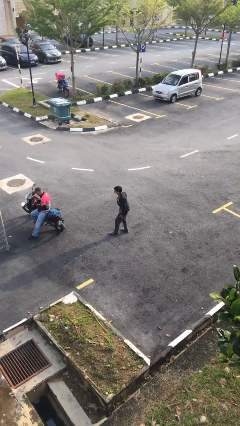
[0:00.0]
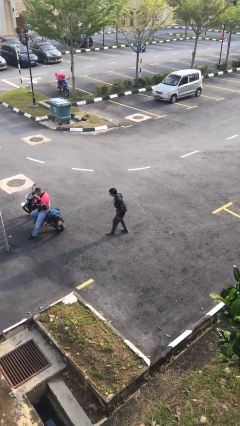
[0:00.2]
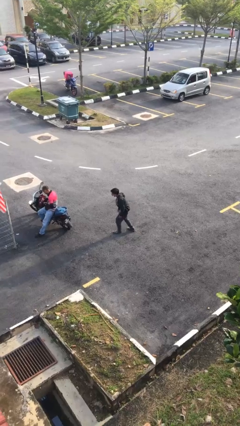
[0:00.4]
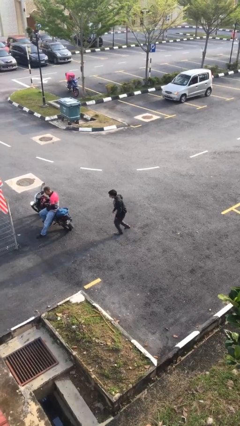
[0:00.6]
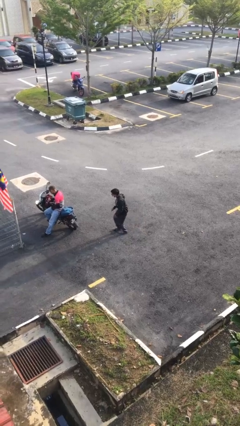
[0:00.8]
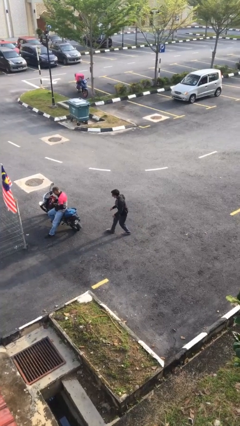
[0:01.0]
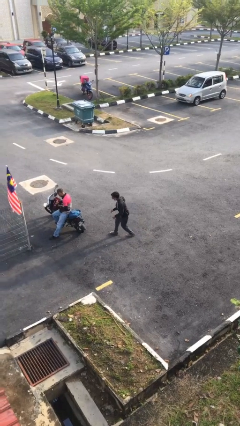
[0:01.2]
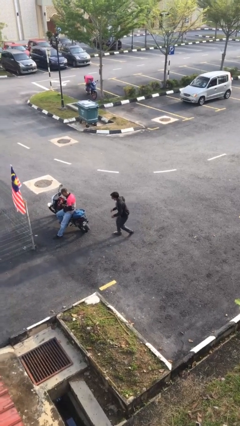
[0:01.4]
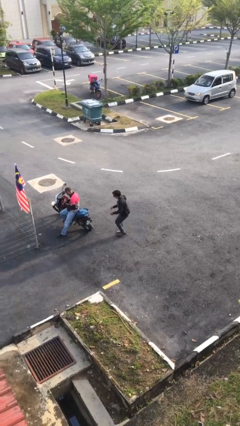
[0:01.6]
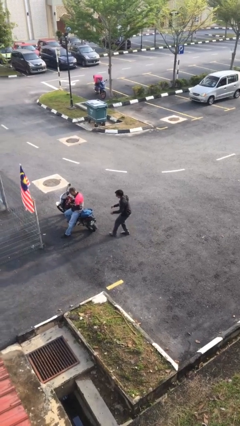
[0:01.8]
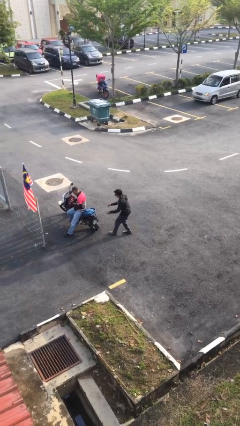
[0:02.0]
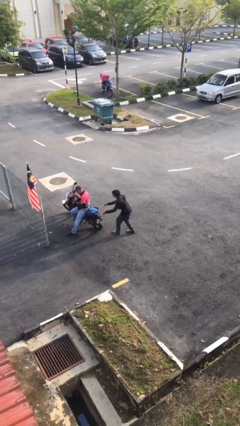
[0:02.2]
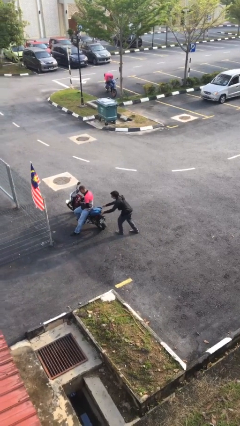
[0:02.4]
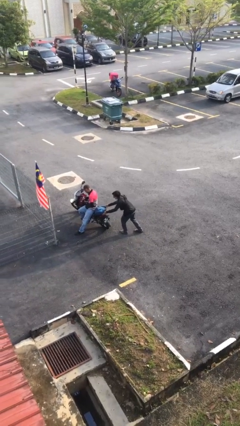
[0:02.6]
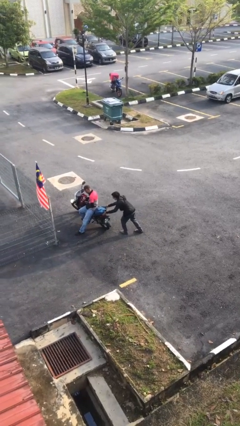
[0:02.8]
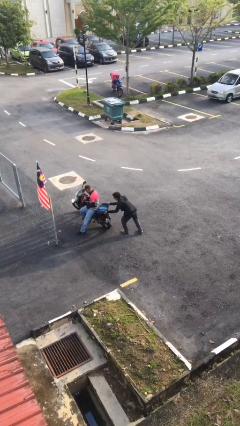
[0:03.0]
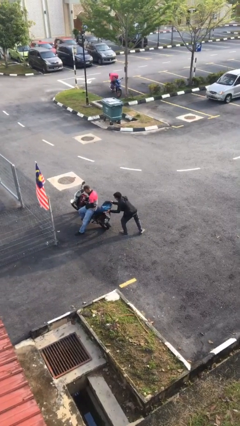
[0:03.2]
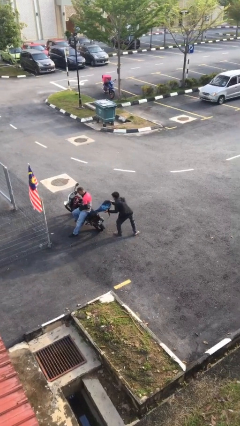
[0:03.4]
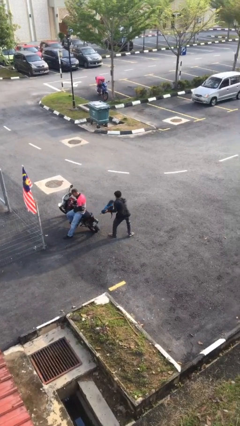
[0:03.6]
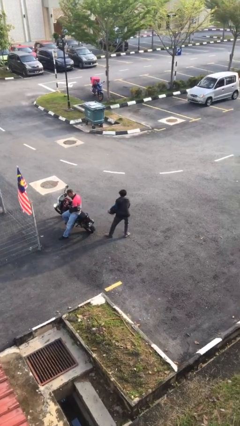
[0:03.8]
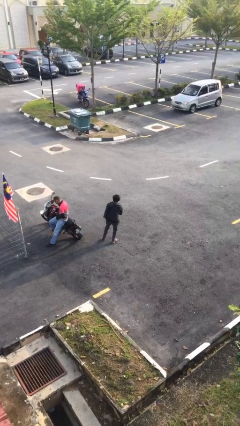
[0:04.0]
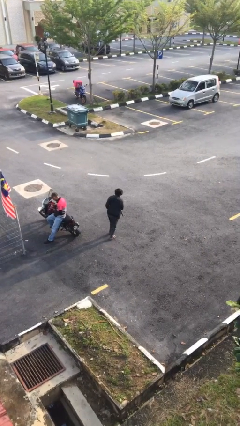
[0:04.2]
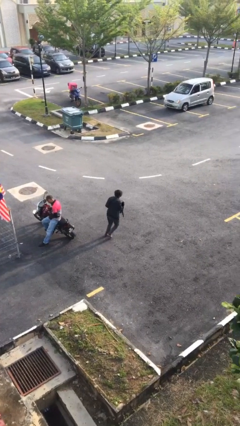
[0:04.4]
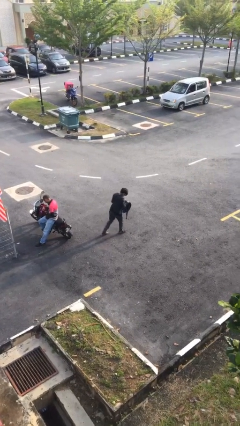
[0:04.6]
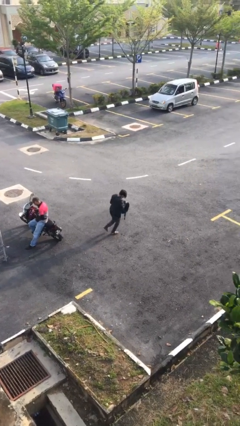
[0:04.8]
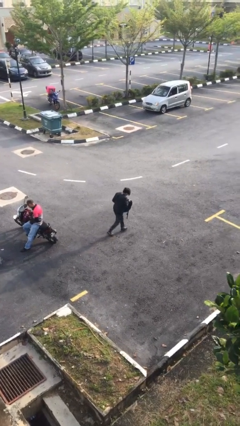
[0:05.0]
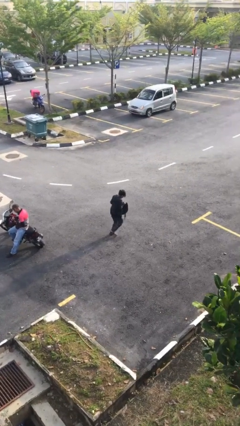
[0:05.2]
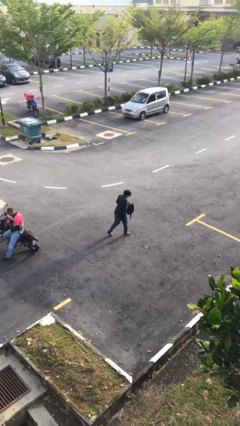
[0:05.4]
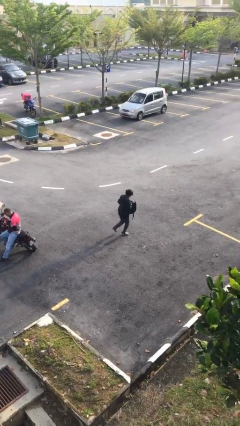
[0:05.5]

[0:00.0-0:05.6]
person steals object from person

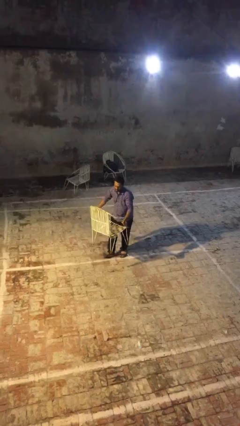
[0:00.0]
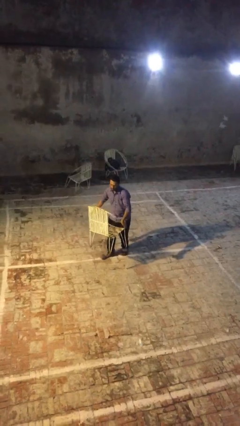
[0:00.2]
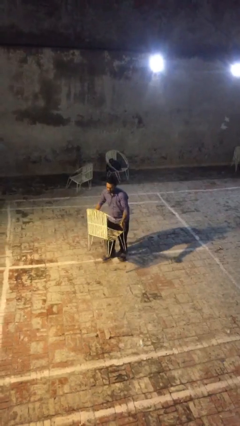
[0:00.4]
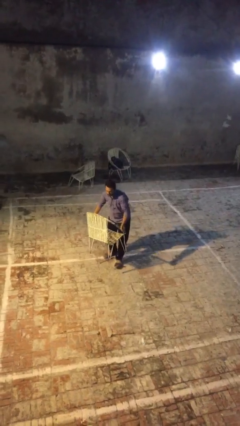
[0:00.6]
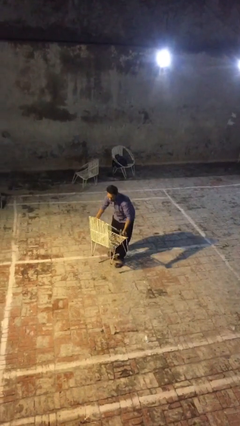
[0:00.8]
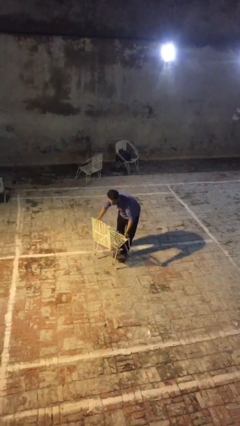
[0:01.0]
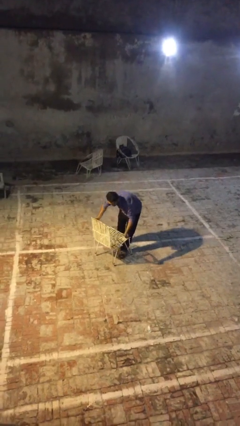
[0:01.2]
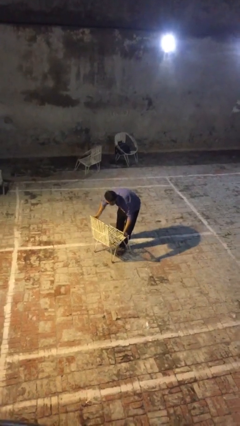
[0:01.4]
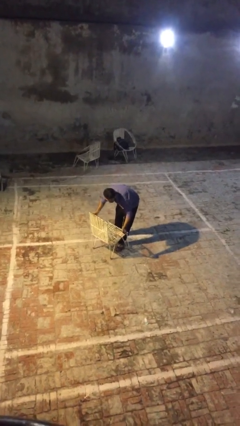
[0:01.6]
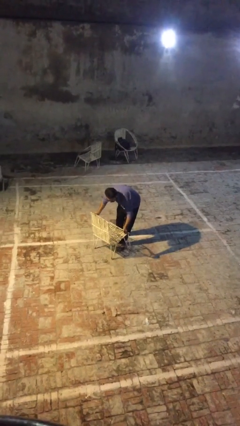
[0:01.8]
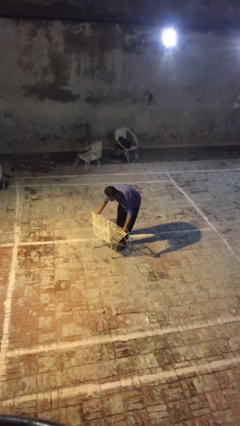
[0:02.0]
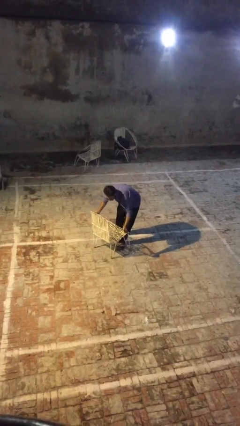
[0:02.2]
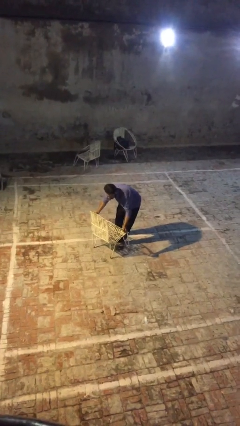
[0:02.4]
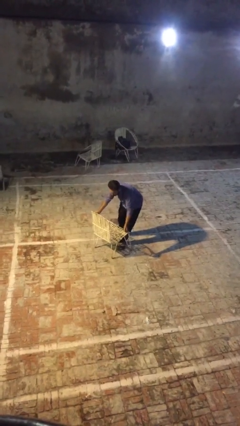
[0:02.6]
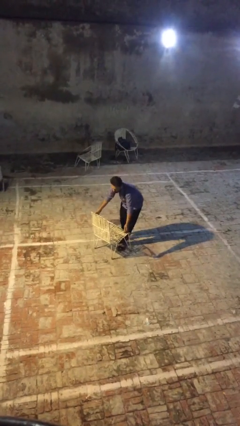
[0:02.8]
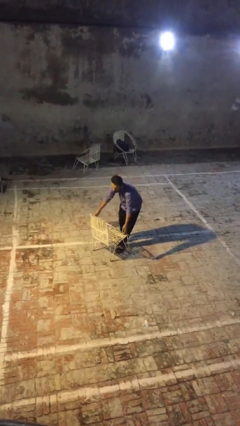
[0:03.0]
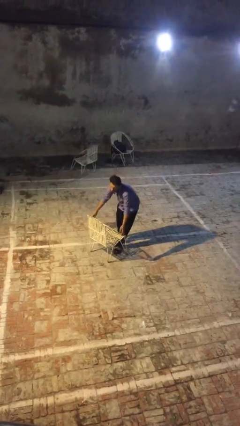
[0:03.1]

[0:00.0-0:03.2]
person puts down object on floor

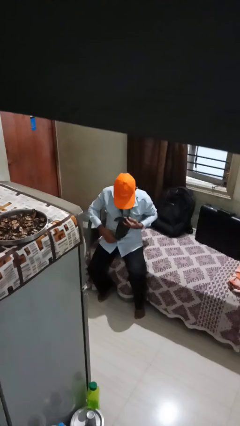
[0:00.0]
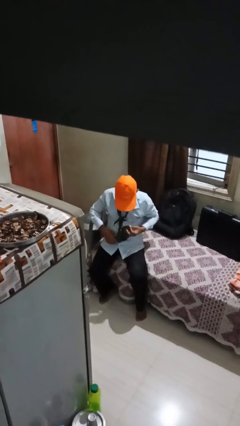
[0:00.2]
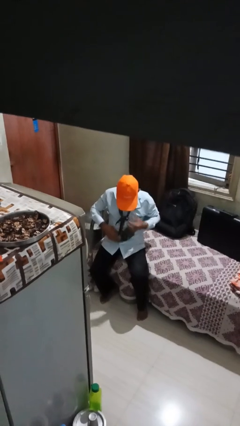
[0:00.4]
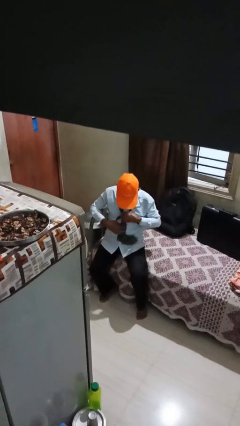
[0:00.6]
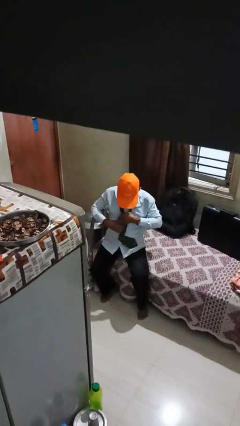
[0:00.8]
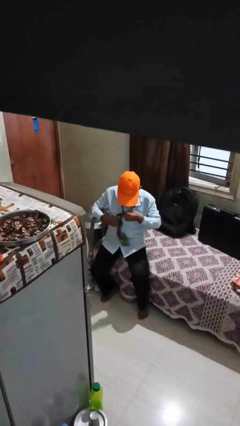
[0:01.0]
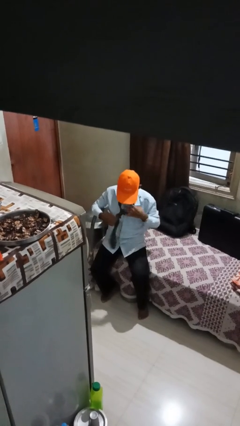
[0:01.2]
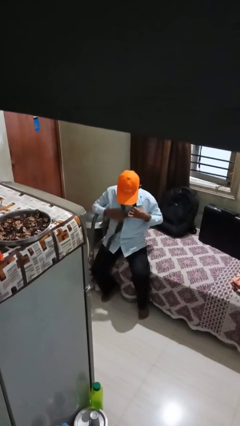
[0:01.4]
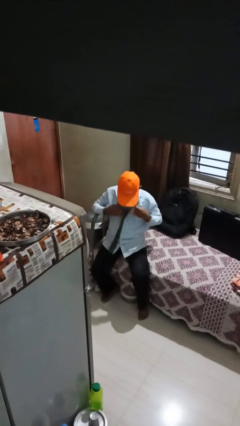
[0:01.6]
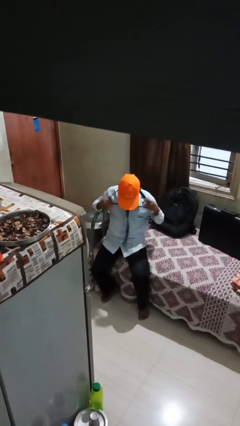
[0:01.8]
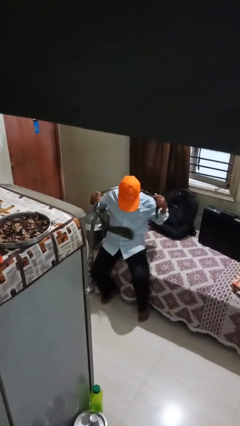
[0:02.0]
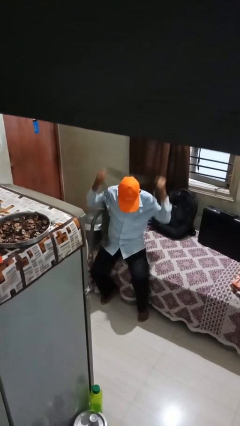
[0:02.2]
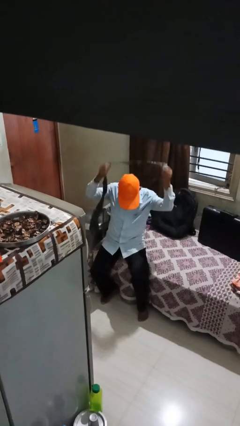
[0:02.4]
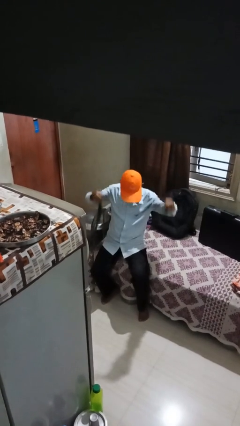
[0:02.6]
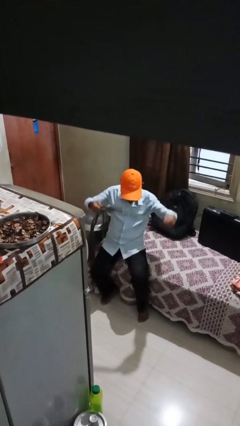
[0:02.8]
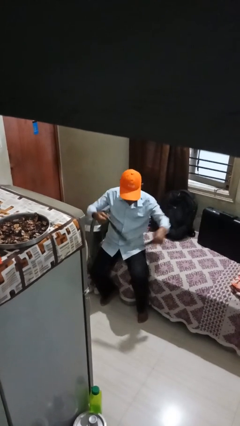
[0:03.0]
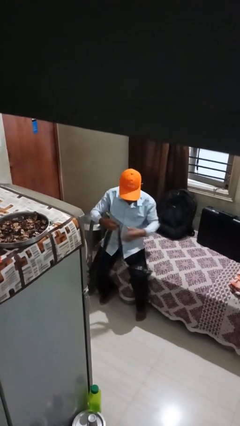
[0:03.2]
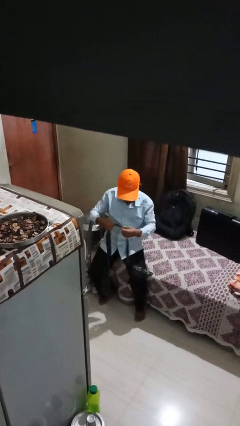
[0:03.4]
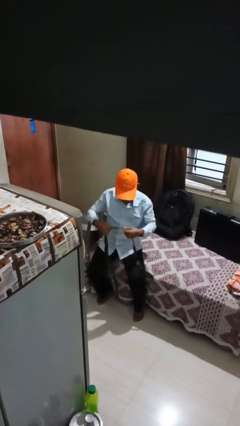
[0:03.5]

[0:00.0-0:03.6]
person takes off necktie

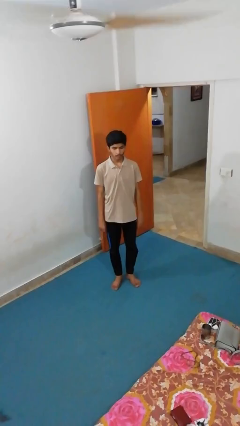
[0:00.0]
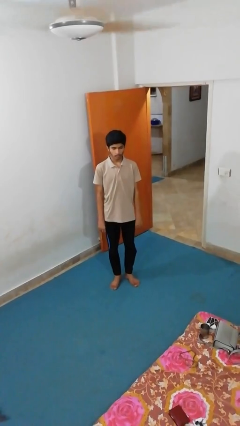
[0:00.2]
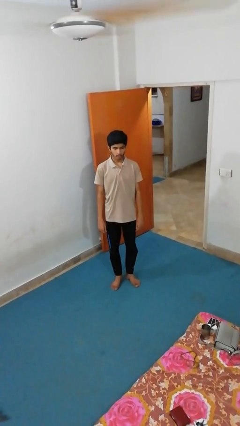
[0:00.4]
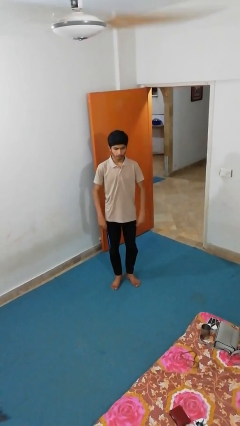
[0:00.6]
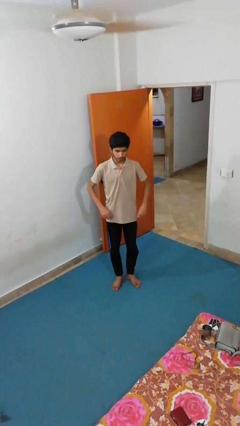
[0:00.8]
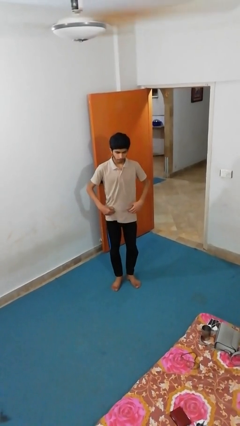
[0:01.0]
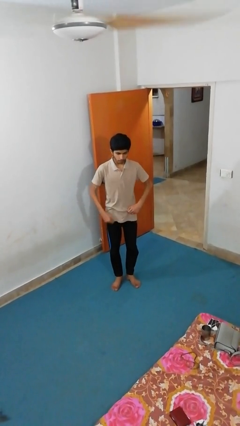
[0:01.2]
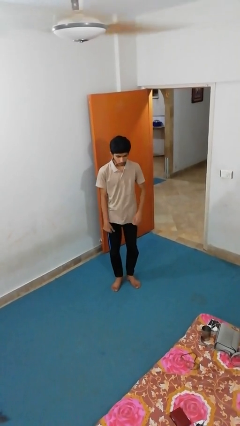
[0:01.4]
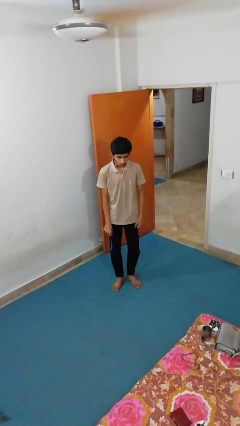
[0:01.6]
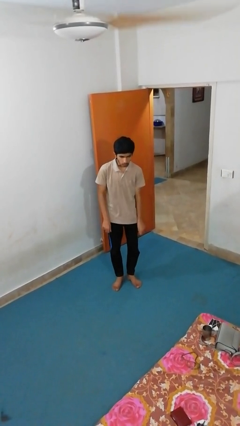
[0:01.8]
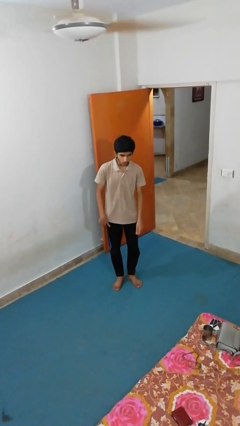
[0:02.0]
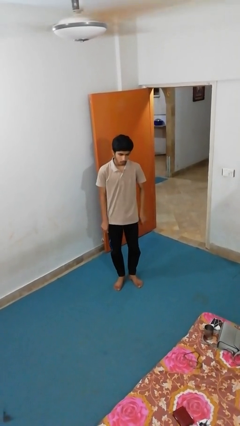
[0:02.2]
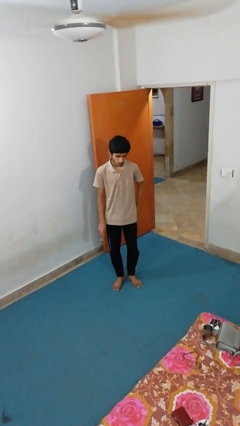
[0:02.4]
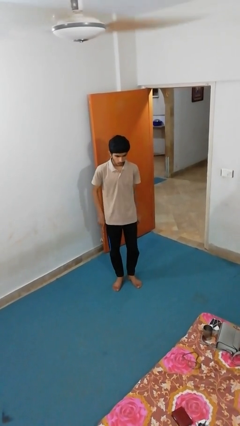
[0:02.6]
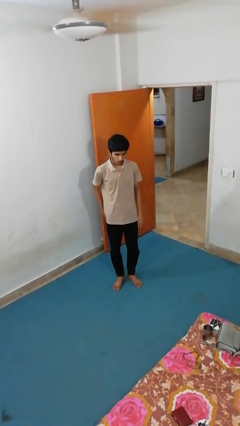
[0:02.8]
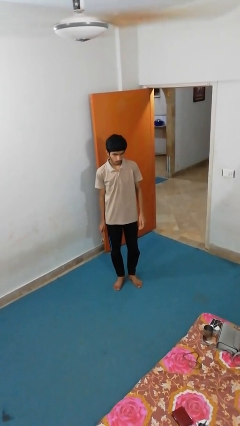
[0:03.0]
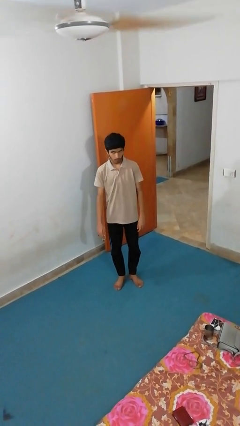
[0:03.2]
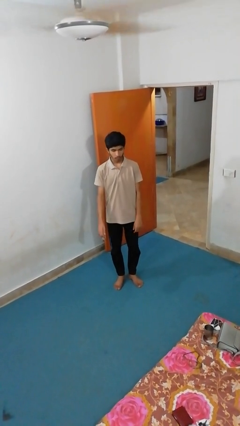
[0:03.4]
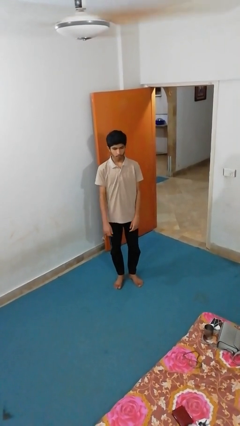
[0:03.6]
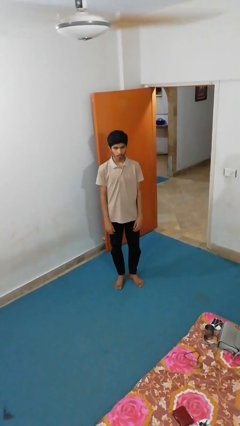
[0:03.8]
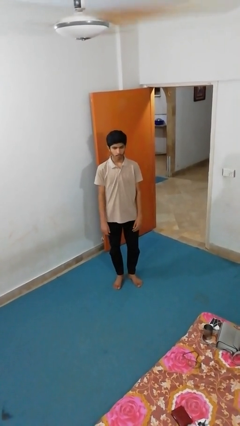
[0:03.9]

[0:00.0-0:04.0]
person hikes up pants

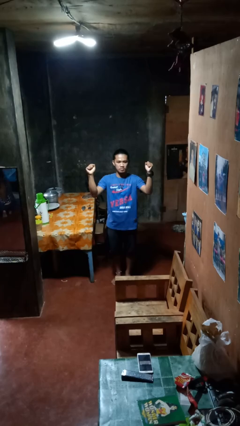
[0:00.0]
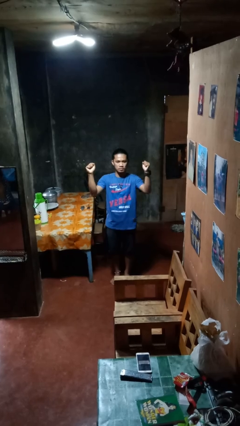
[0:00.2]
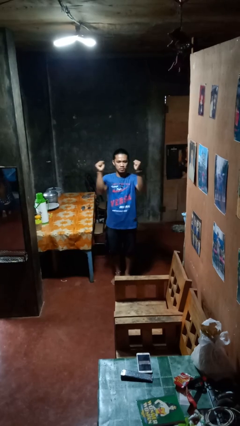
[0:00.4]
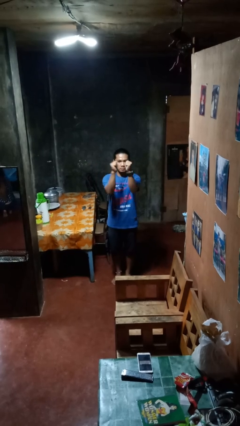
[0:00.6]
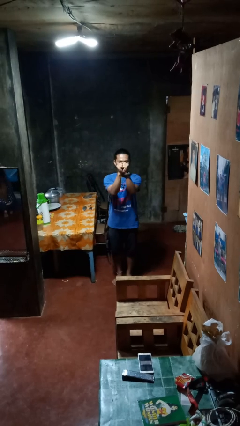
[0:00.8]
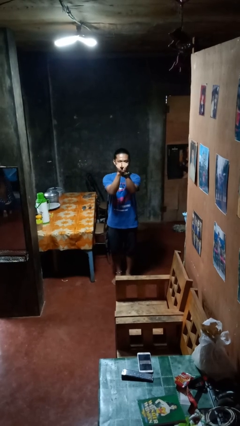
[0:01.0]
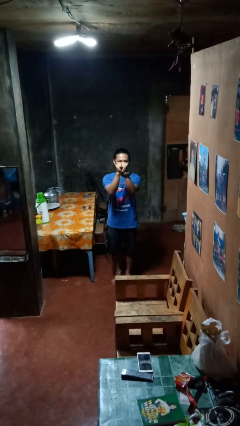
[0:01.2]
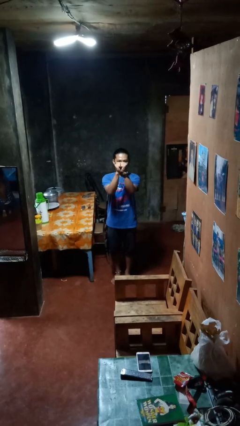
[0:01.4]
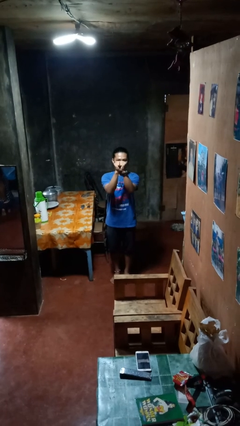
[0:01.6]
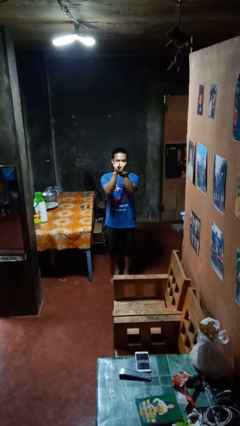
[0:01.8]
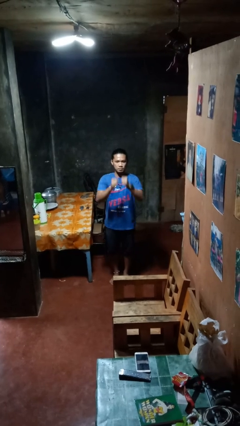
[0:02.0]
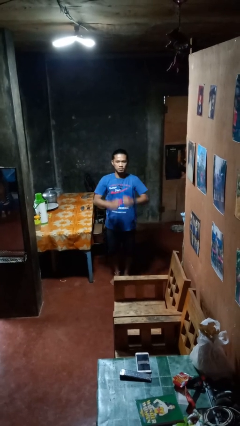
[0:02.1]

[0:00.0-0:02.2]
person gestures zoom out
